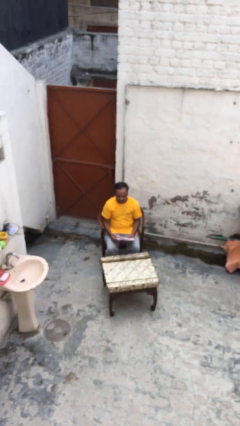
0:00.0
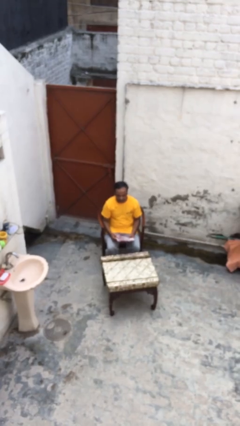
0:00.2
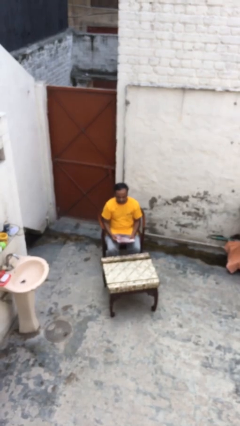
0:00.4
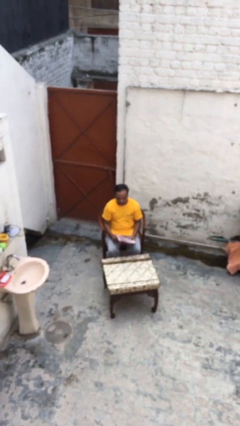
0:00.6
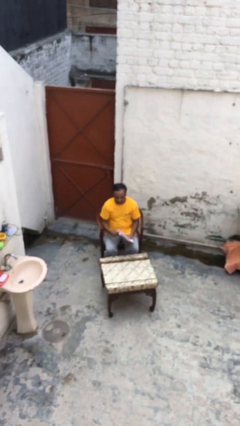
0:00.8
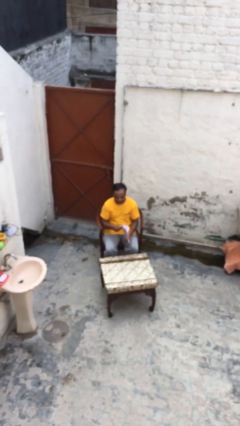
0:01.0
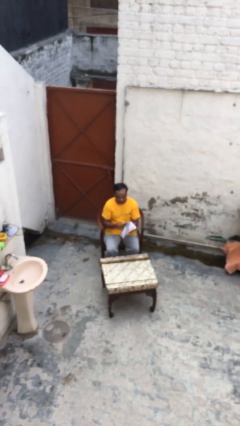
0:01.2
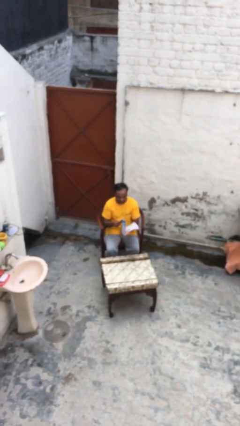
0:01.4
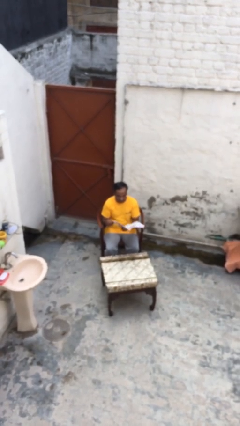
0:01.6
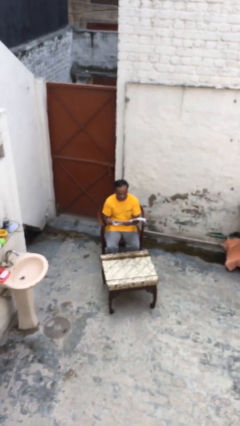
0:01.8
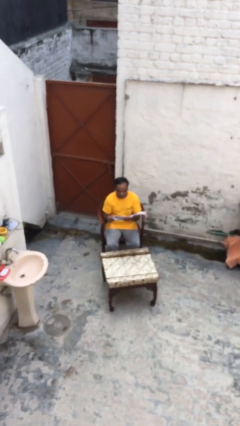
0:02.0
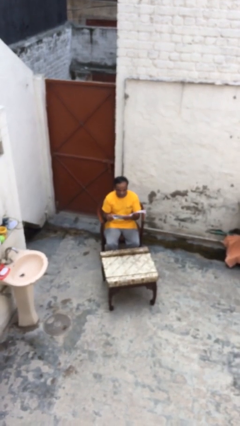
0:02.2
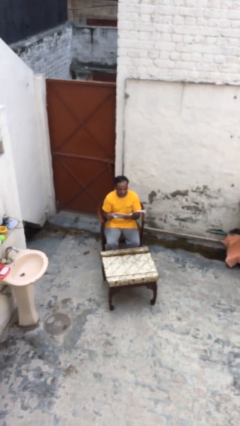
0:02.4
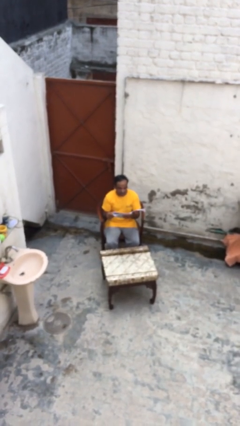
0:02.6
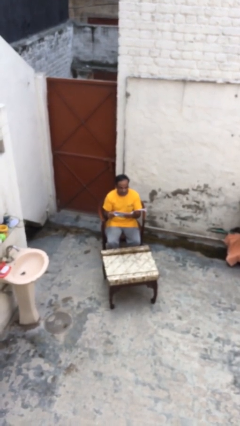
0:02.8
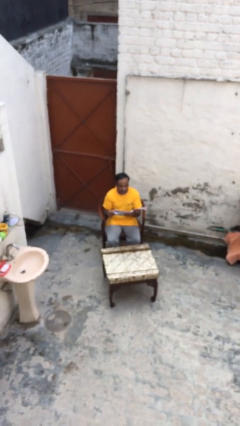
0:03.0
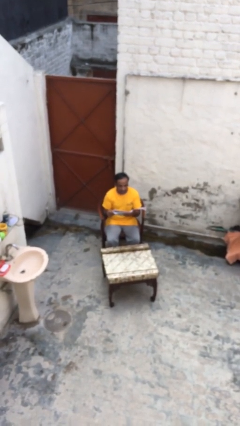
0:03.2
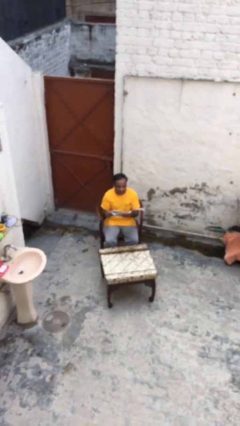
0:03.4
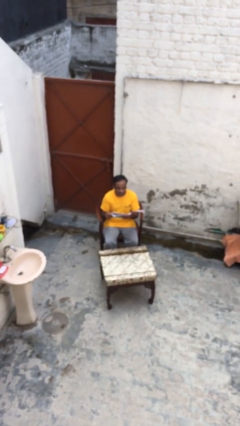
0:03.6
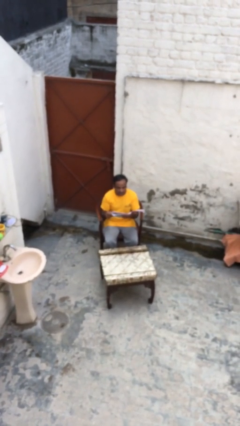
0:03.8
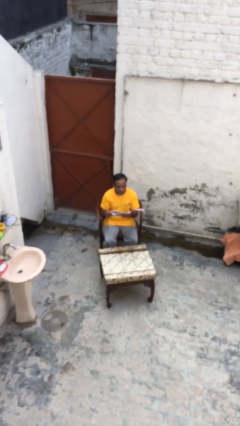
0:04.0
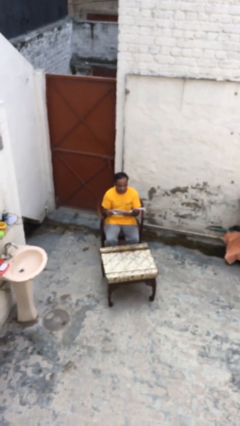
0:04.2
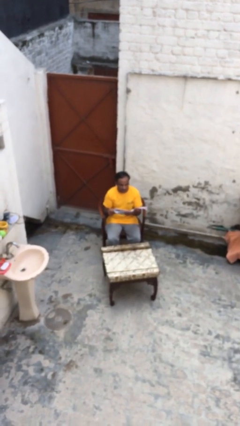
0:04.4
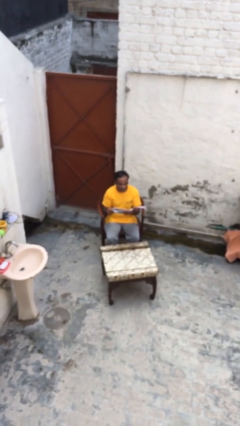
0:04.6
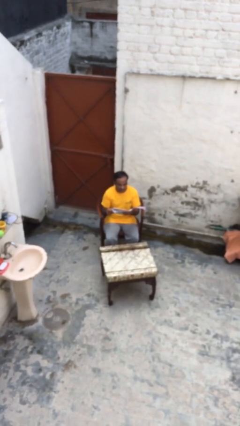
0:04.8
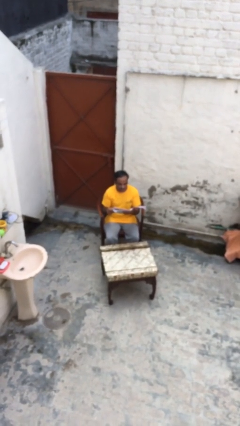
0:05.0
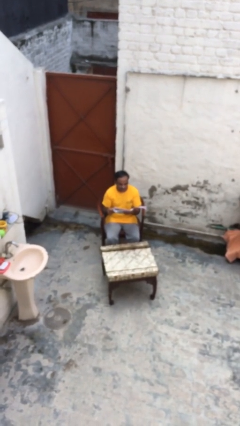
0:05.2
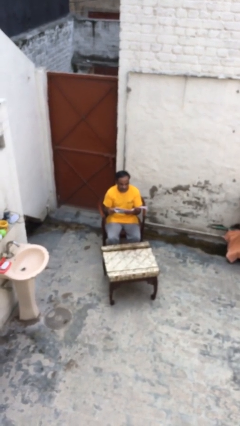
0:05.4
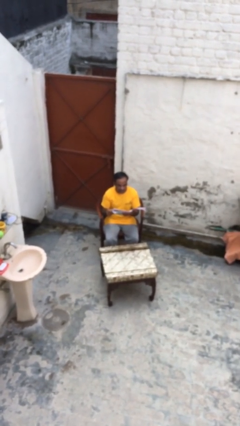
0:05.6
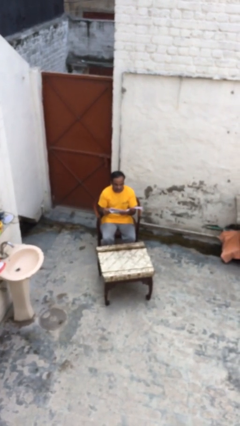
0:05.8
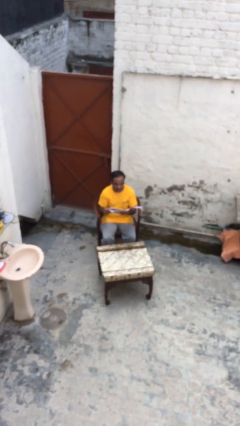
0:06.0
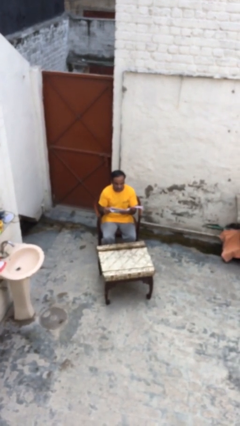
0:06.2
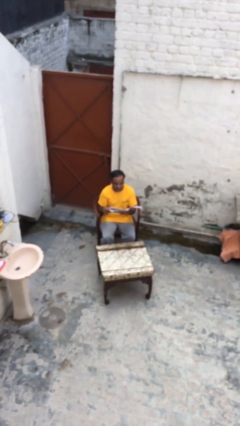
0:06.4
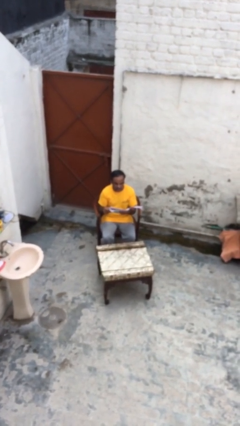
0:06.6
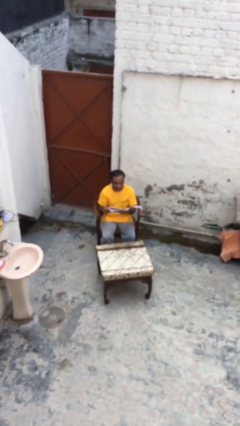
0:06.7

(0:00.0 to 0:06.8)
person reads document

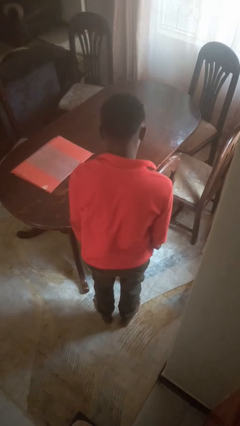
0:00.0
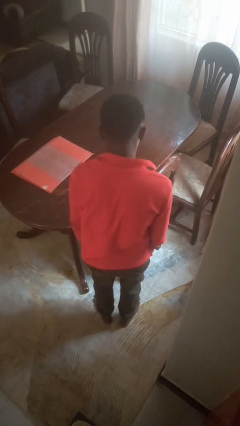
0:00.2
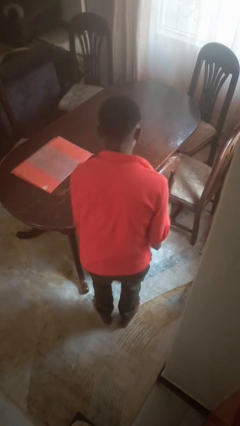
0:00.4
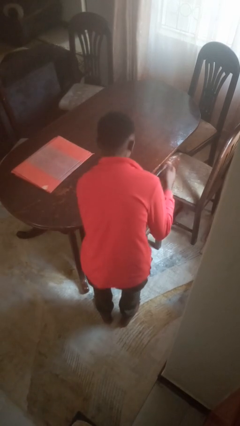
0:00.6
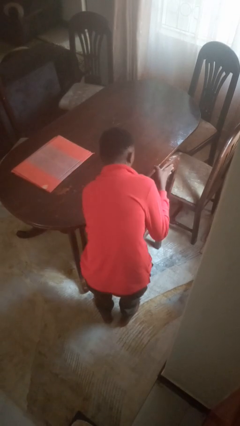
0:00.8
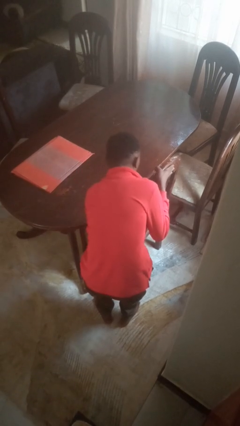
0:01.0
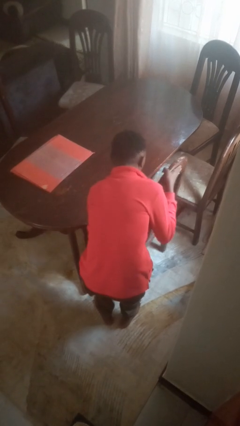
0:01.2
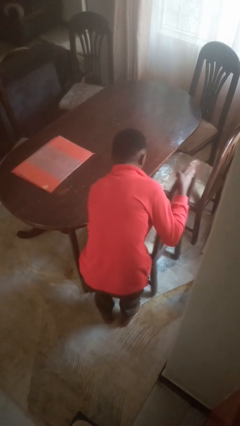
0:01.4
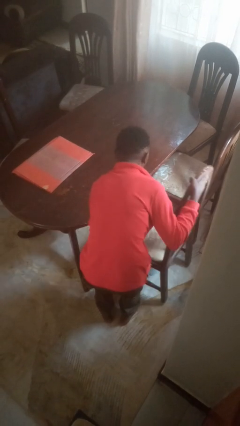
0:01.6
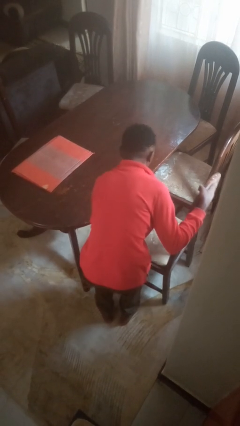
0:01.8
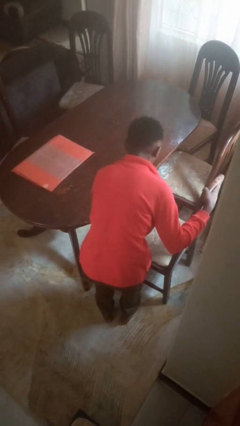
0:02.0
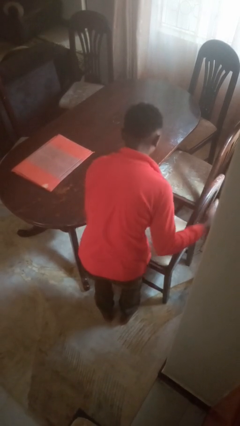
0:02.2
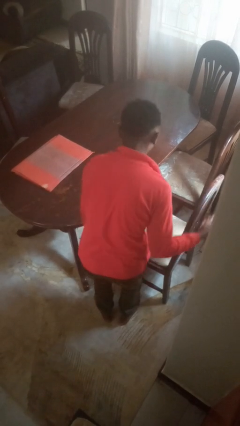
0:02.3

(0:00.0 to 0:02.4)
person pulls out chair

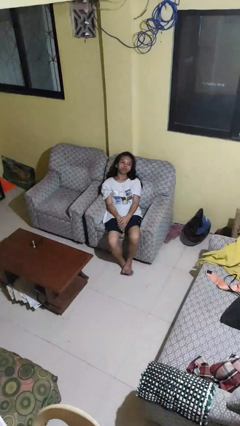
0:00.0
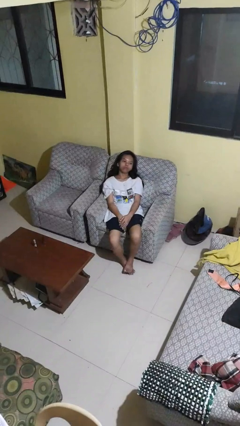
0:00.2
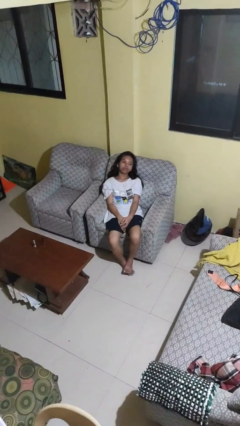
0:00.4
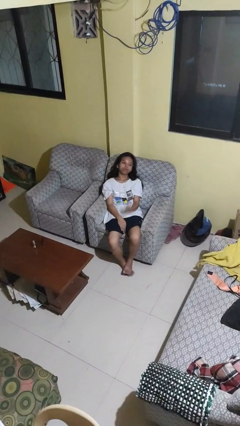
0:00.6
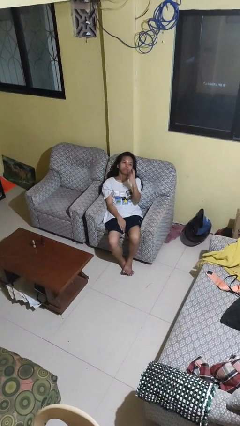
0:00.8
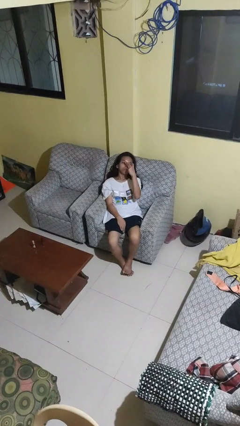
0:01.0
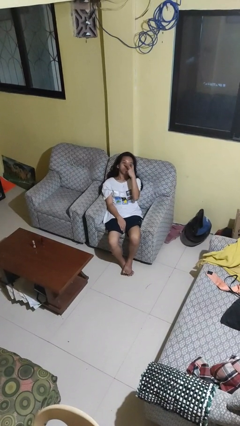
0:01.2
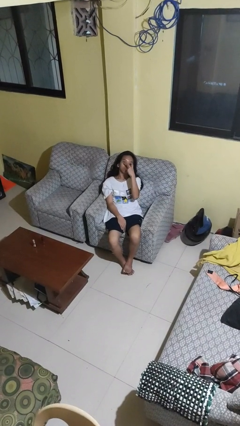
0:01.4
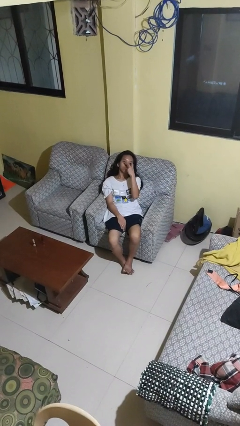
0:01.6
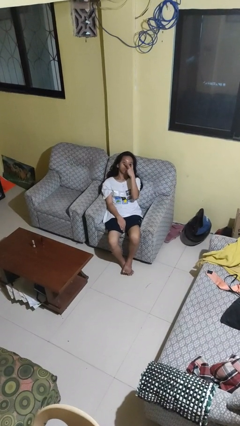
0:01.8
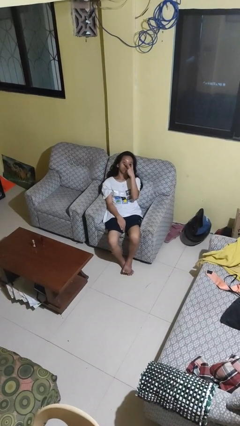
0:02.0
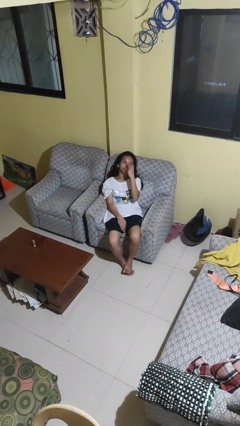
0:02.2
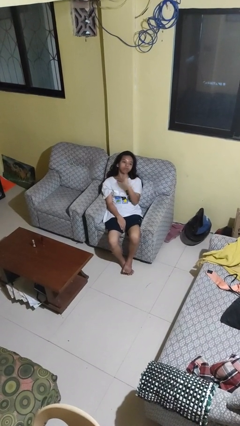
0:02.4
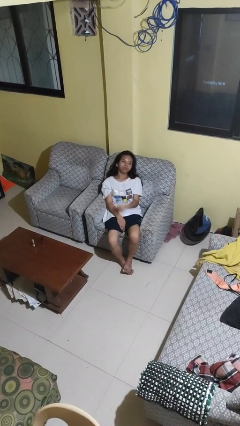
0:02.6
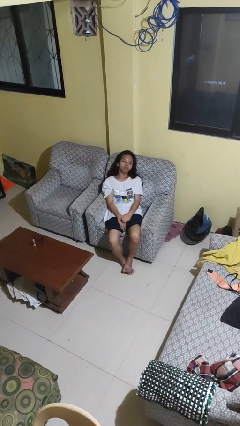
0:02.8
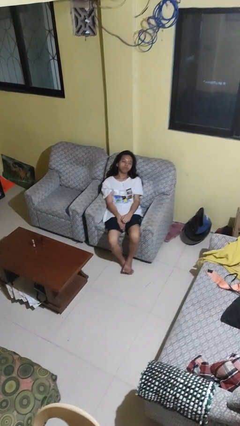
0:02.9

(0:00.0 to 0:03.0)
person gestures watch closely

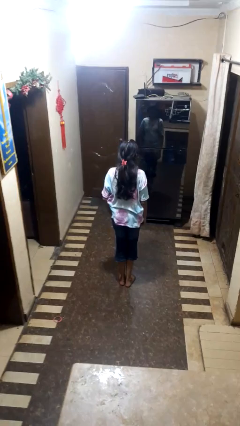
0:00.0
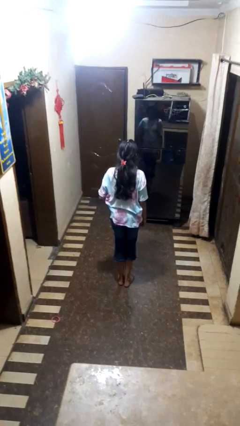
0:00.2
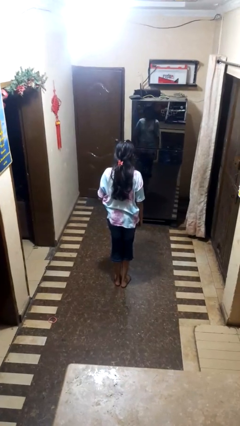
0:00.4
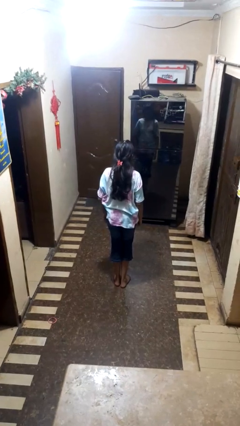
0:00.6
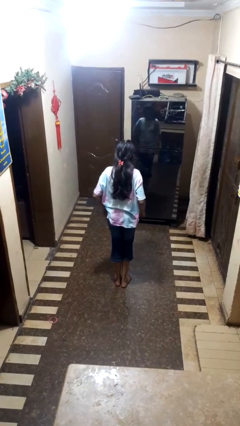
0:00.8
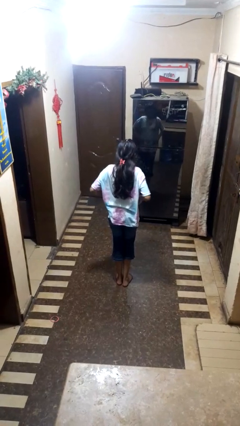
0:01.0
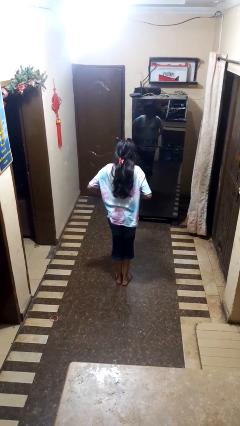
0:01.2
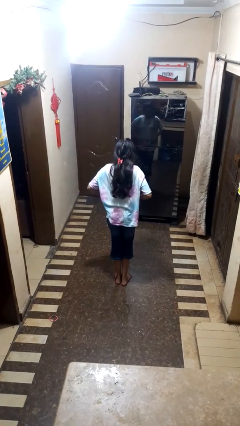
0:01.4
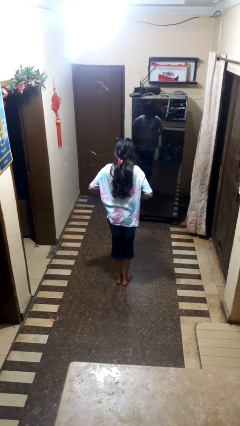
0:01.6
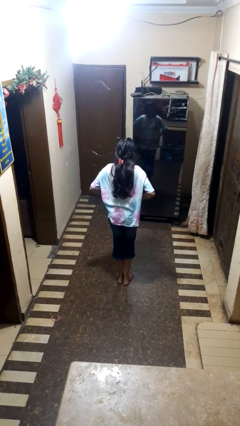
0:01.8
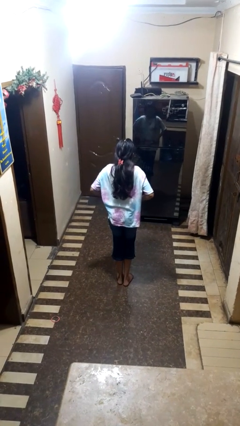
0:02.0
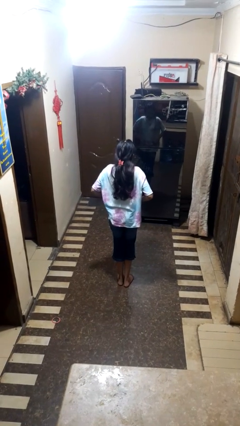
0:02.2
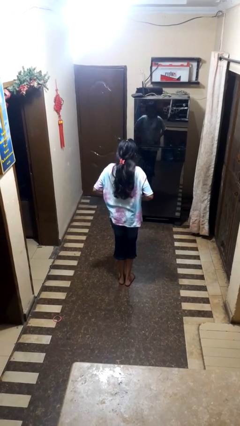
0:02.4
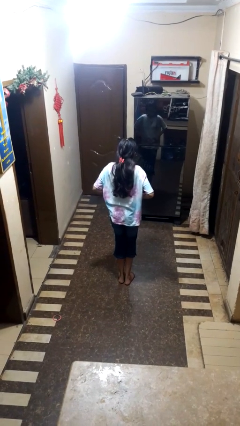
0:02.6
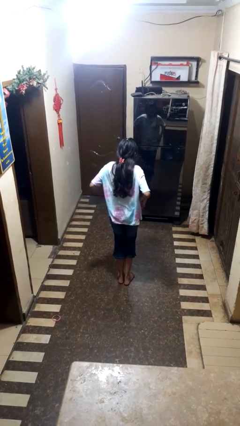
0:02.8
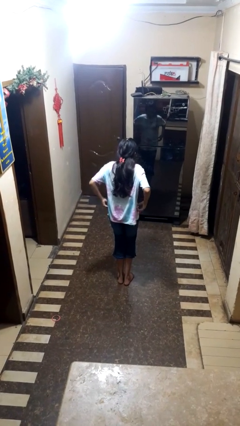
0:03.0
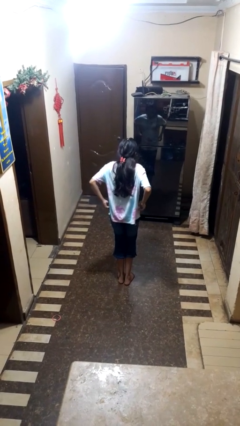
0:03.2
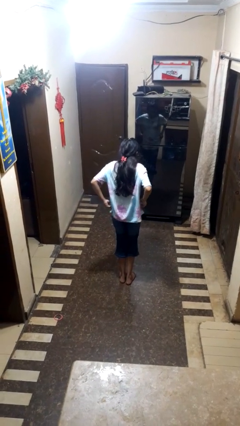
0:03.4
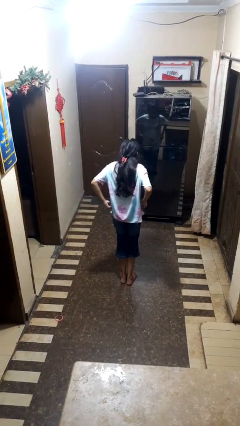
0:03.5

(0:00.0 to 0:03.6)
person hikes up pants

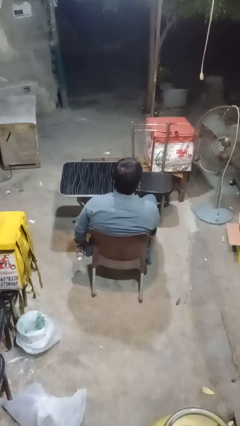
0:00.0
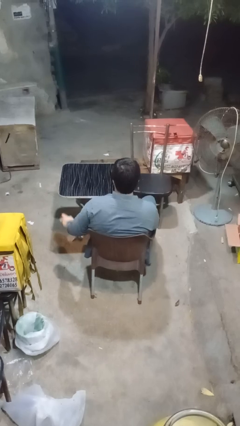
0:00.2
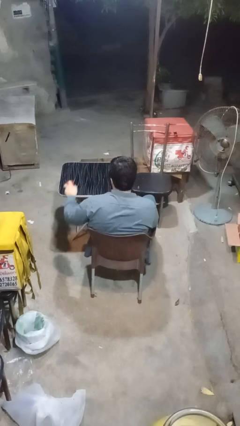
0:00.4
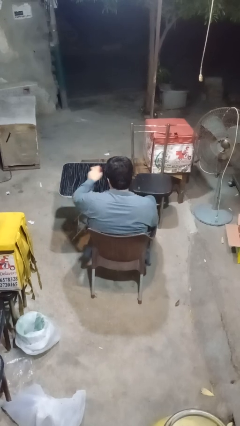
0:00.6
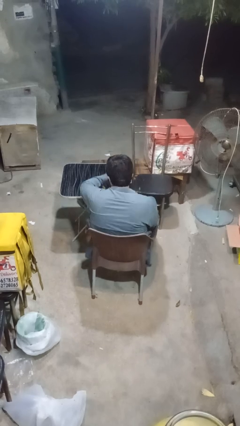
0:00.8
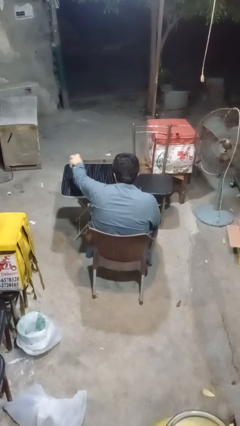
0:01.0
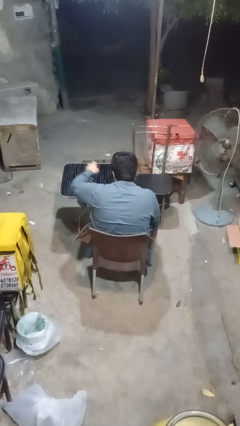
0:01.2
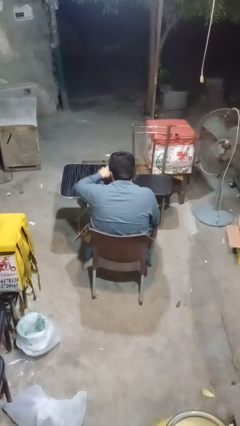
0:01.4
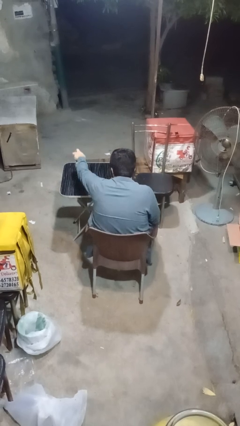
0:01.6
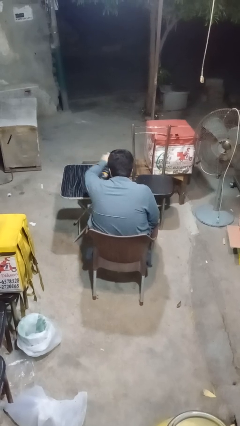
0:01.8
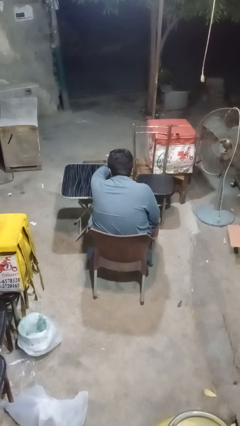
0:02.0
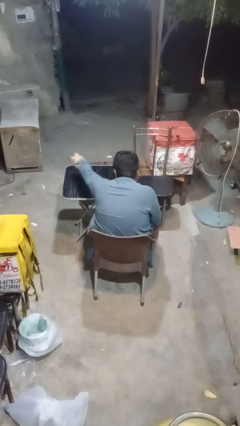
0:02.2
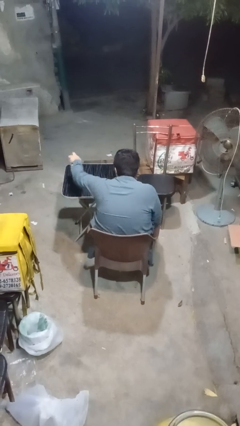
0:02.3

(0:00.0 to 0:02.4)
person sprays from bottle
